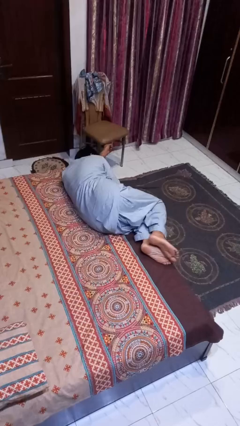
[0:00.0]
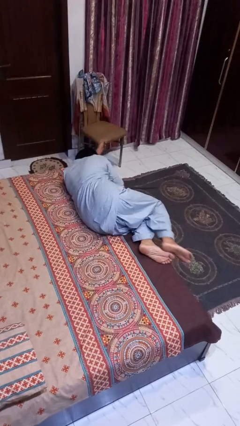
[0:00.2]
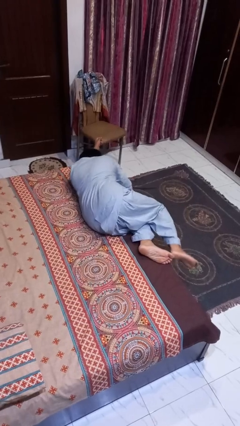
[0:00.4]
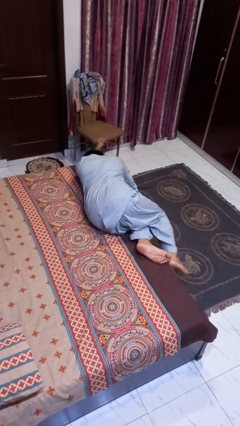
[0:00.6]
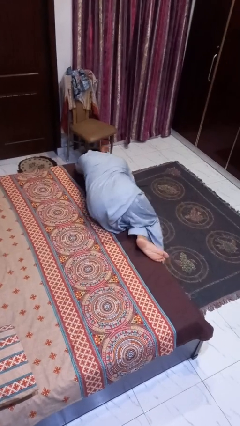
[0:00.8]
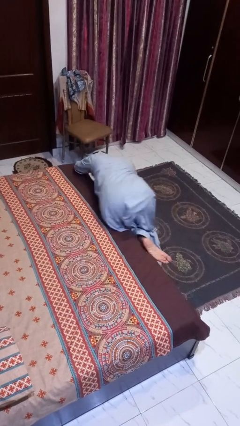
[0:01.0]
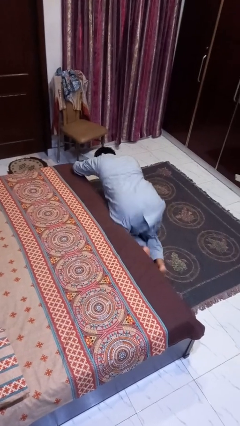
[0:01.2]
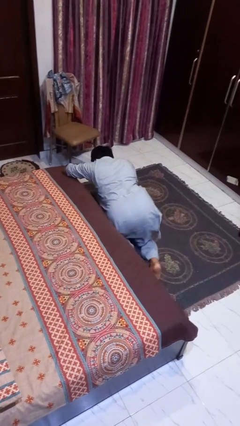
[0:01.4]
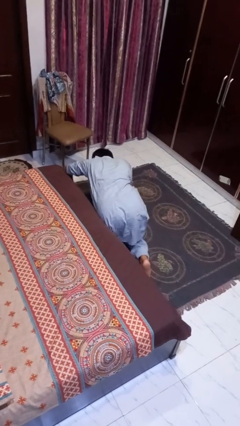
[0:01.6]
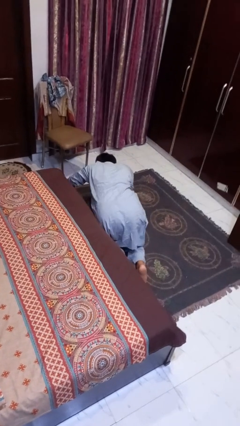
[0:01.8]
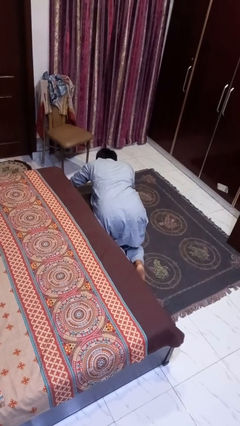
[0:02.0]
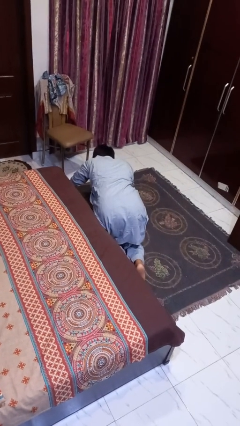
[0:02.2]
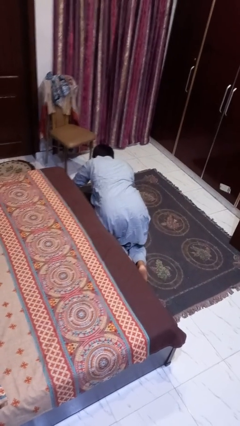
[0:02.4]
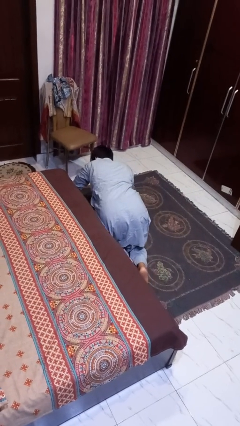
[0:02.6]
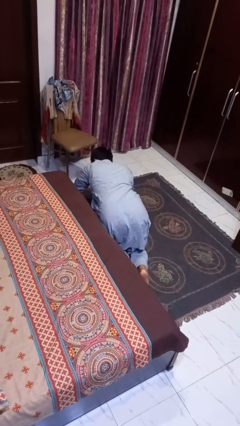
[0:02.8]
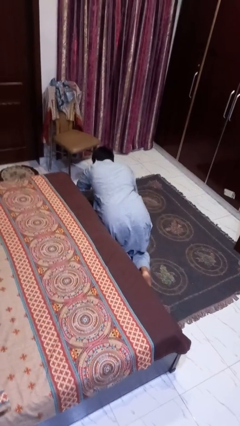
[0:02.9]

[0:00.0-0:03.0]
person falls from bed

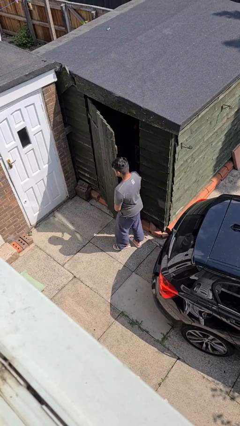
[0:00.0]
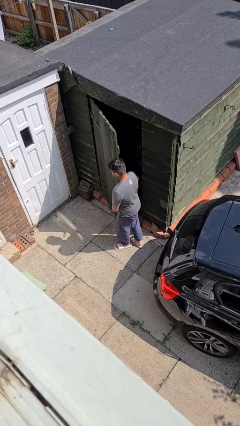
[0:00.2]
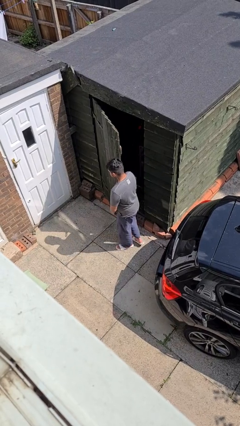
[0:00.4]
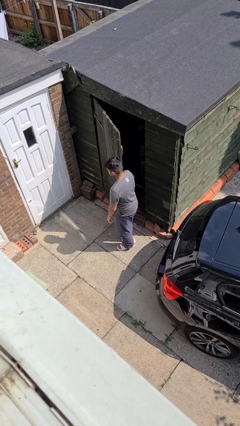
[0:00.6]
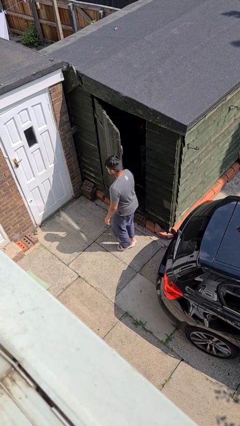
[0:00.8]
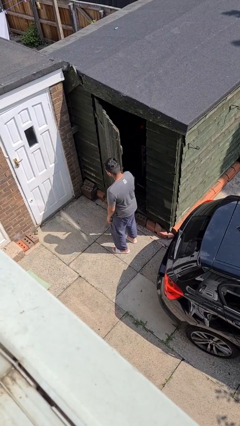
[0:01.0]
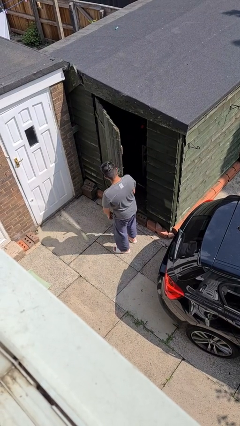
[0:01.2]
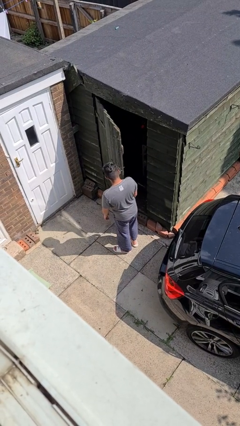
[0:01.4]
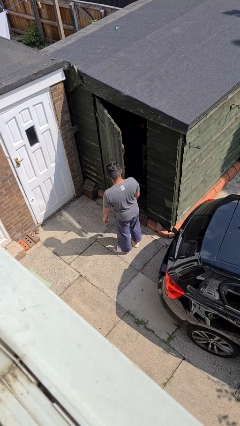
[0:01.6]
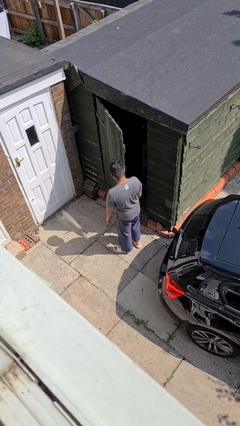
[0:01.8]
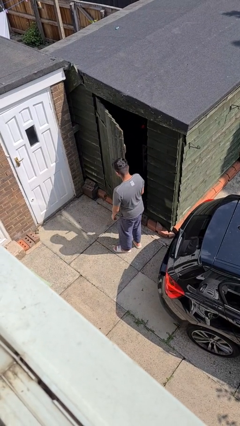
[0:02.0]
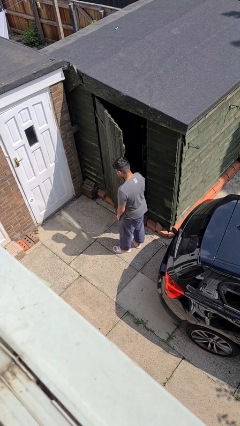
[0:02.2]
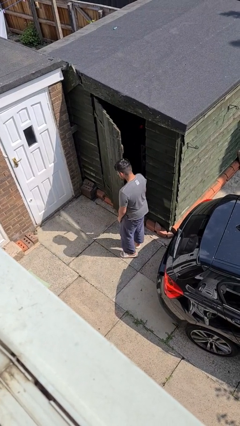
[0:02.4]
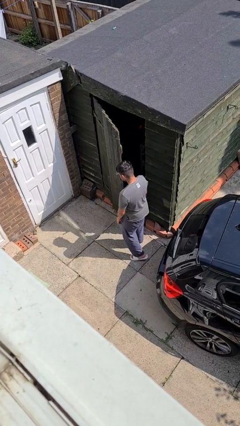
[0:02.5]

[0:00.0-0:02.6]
person bumps into wall

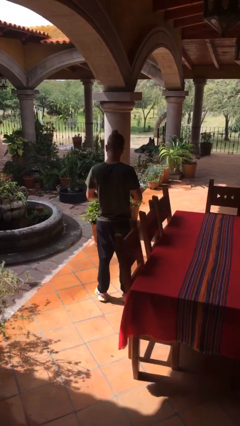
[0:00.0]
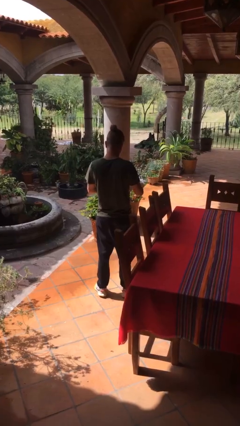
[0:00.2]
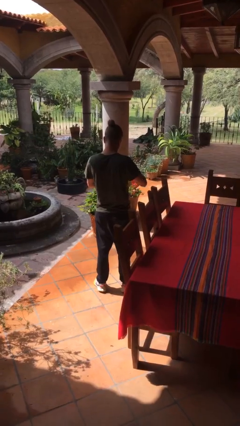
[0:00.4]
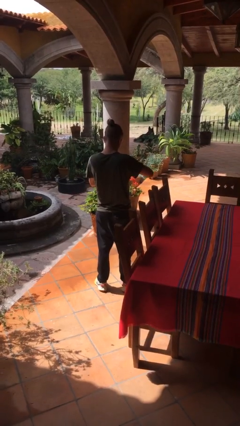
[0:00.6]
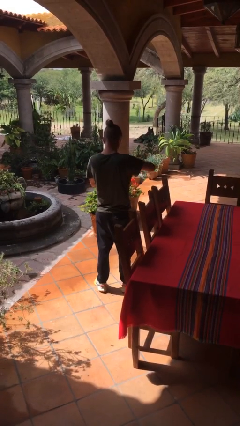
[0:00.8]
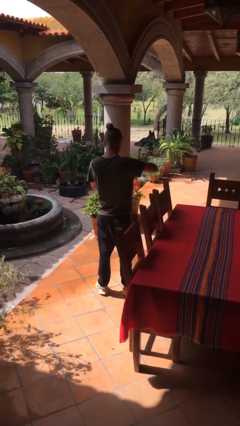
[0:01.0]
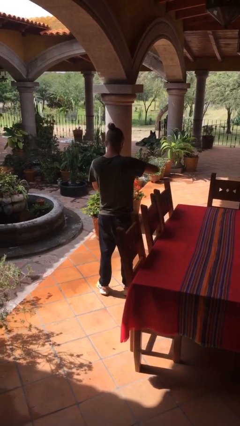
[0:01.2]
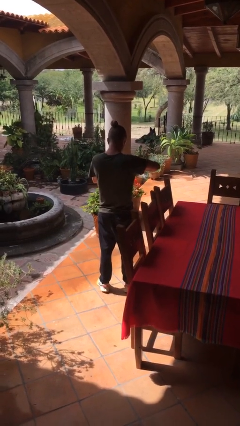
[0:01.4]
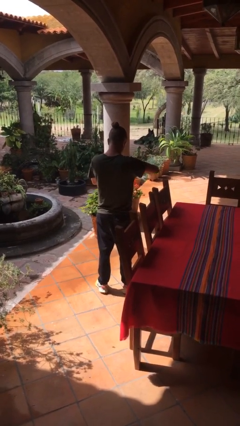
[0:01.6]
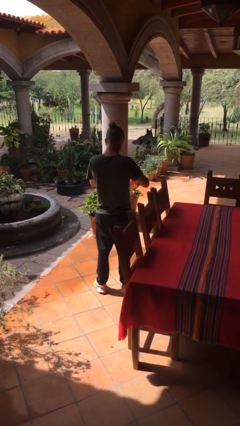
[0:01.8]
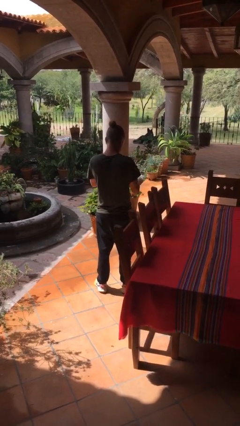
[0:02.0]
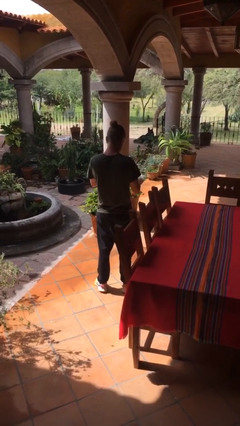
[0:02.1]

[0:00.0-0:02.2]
person opens beverage can

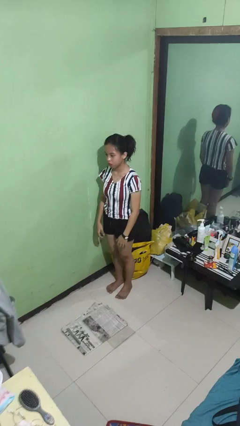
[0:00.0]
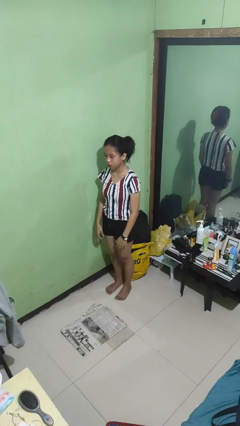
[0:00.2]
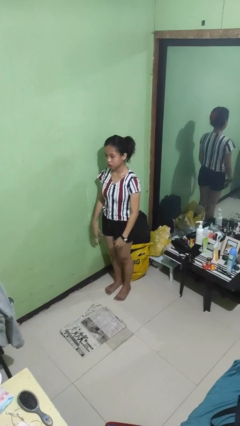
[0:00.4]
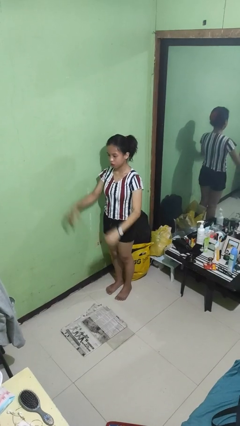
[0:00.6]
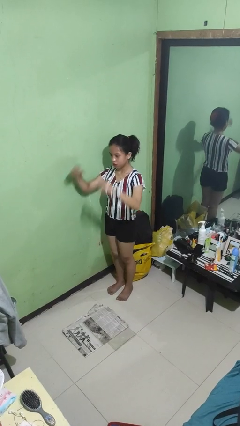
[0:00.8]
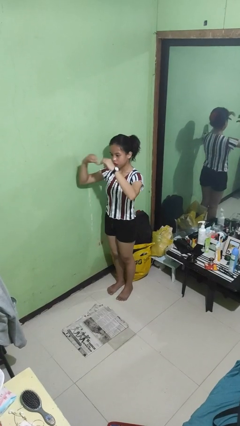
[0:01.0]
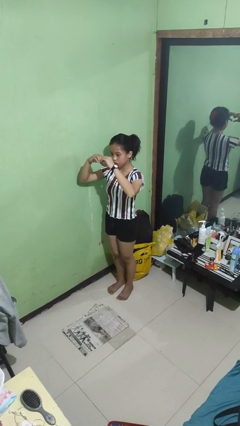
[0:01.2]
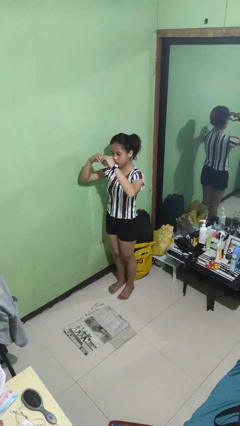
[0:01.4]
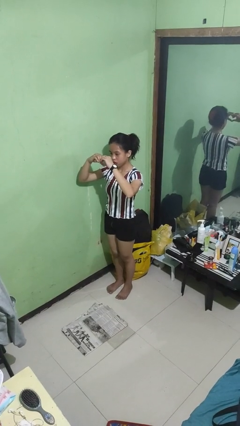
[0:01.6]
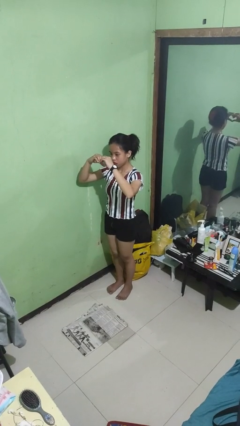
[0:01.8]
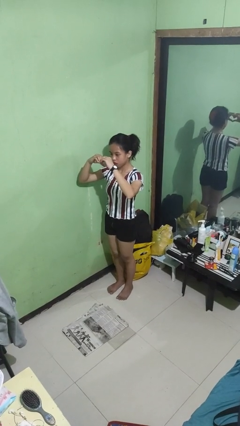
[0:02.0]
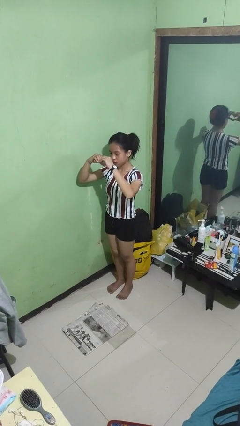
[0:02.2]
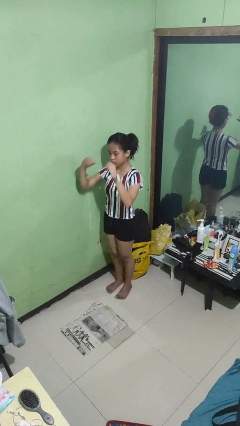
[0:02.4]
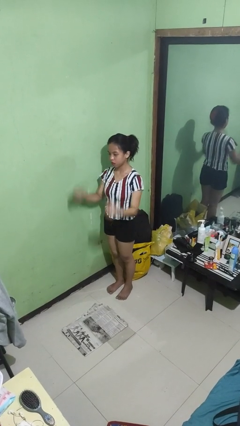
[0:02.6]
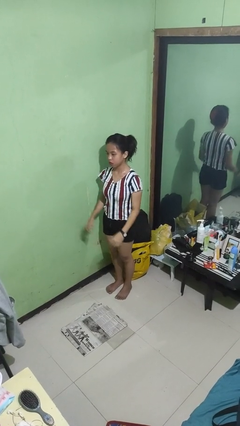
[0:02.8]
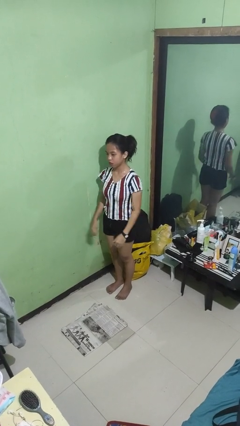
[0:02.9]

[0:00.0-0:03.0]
person gestures heart

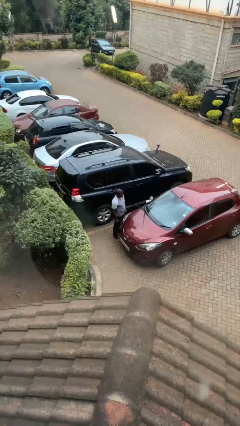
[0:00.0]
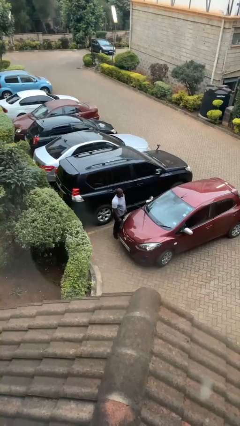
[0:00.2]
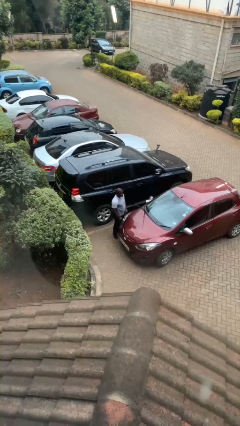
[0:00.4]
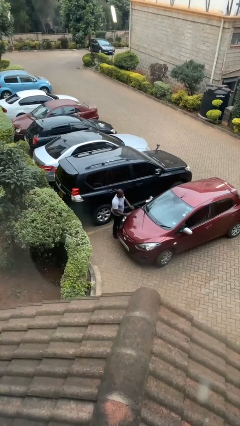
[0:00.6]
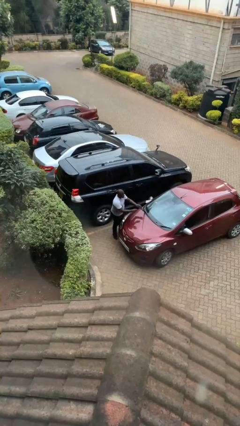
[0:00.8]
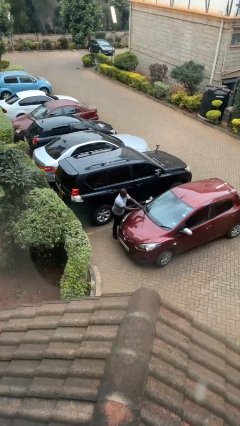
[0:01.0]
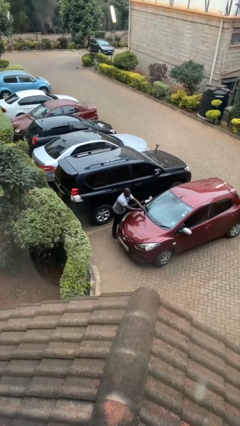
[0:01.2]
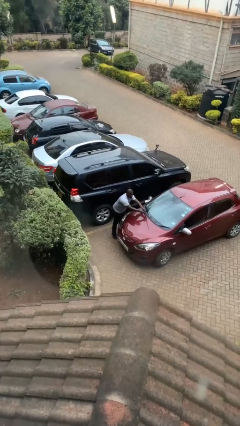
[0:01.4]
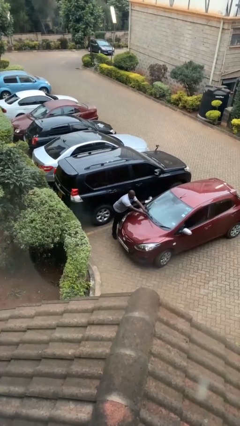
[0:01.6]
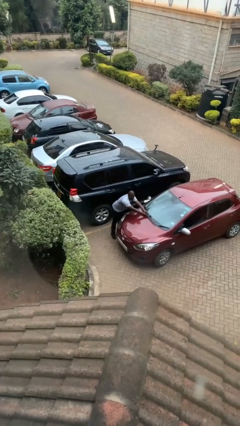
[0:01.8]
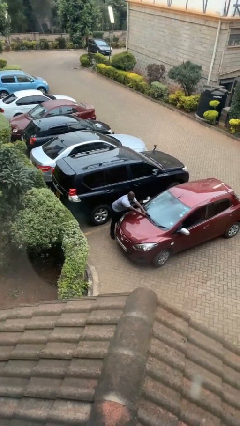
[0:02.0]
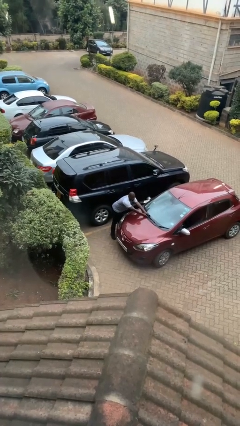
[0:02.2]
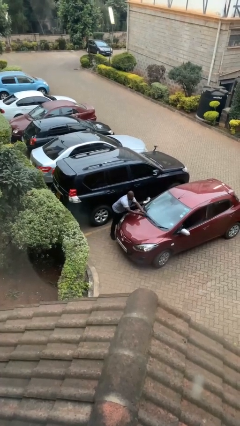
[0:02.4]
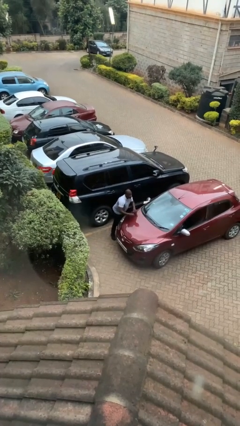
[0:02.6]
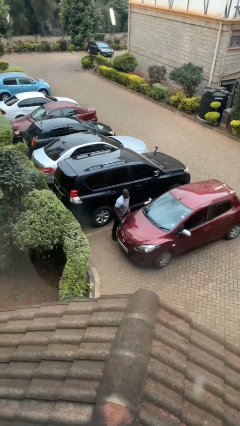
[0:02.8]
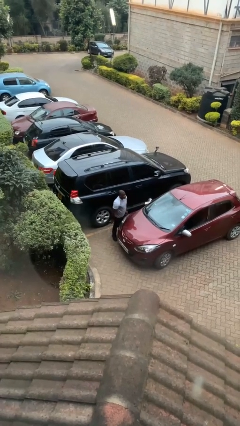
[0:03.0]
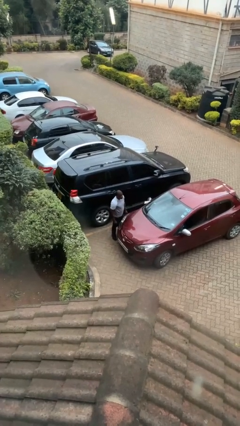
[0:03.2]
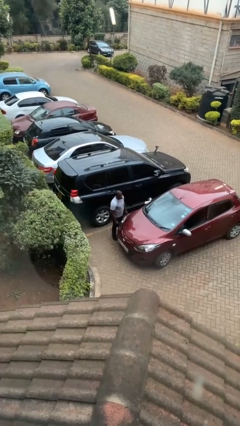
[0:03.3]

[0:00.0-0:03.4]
person flips down car wipers

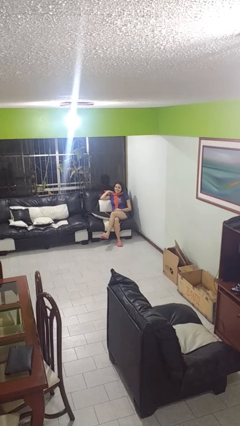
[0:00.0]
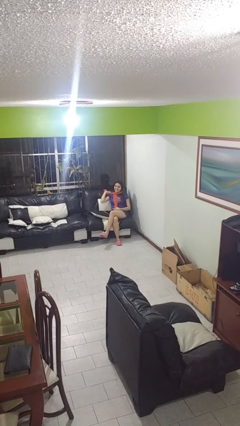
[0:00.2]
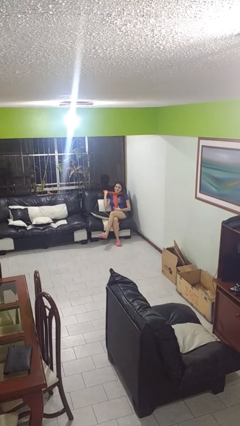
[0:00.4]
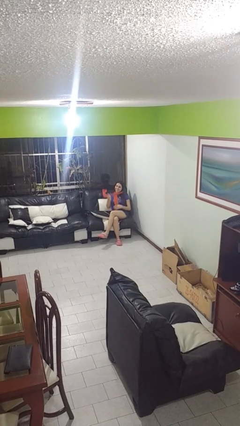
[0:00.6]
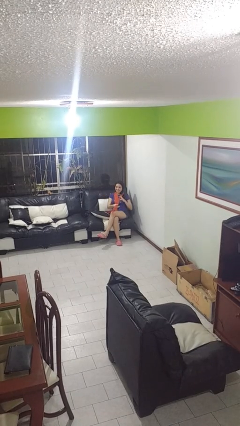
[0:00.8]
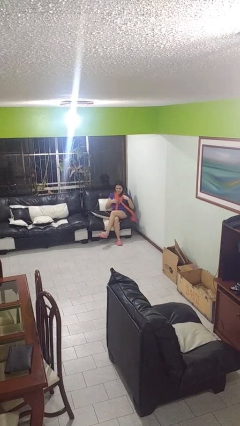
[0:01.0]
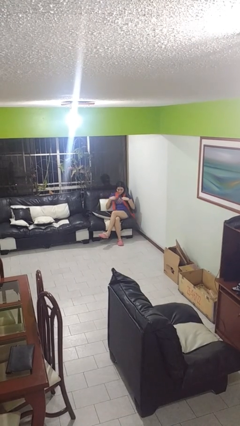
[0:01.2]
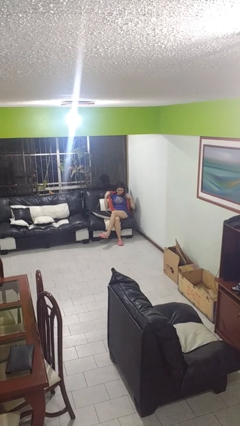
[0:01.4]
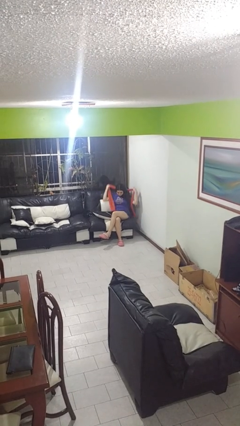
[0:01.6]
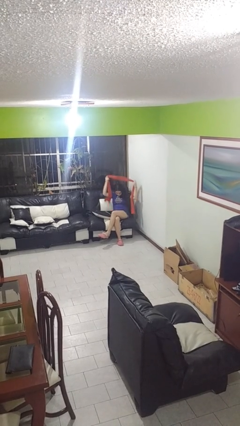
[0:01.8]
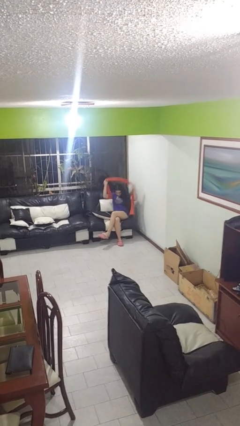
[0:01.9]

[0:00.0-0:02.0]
person takes off scarf

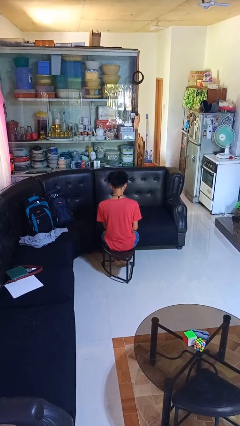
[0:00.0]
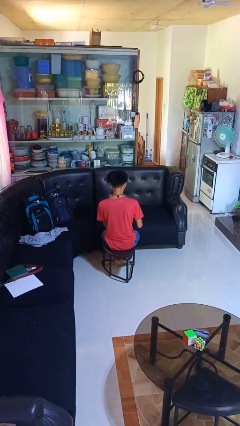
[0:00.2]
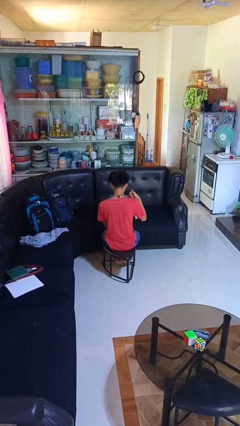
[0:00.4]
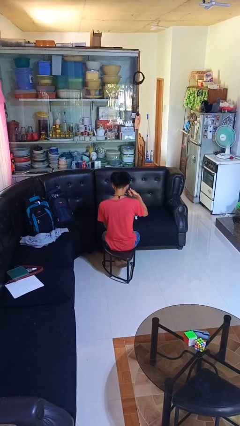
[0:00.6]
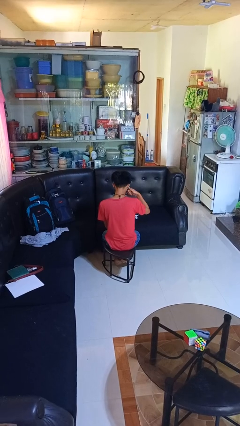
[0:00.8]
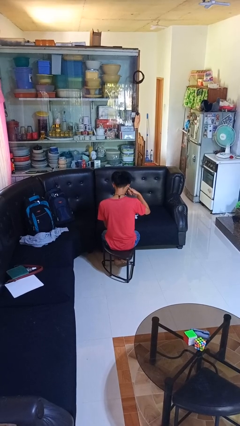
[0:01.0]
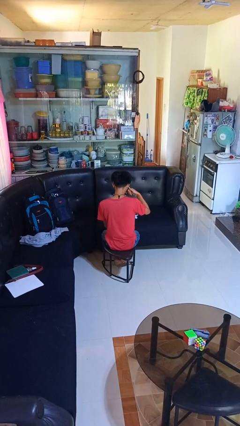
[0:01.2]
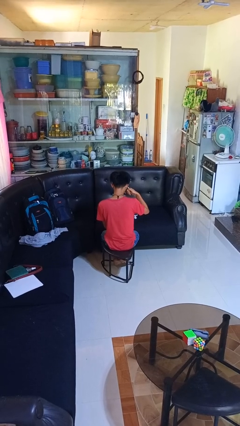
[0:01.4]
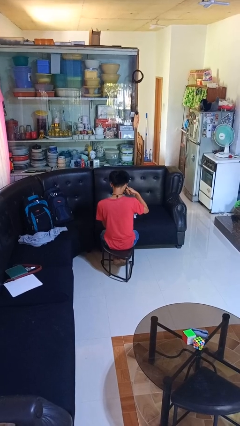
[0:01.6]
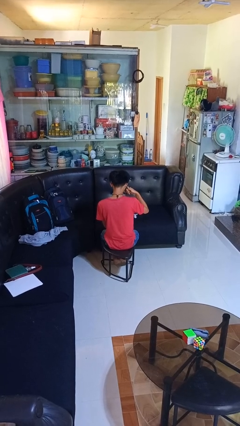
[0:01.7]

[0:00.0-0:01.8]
person gestures call me
